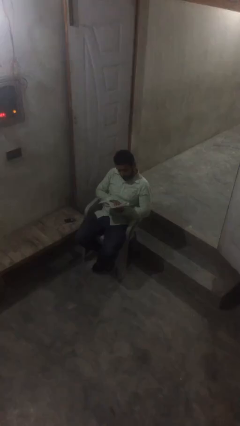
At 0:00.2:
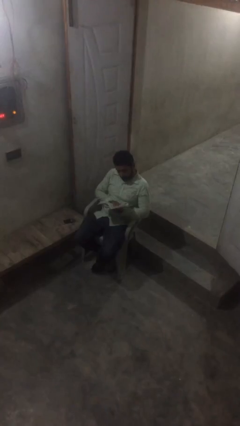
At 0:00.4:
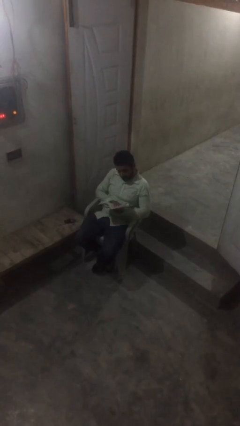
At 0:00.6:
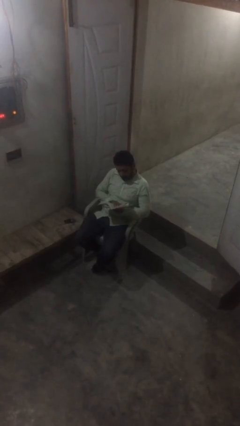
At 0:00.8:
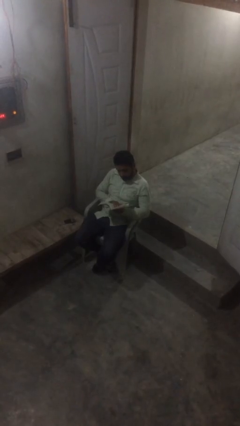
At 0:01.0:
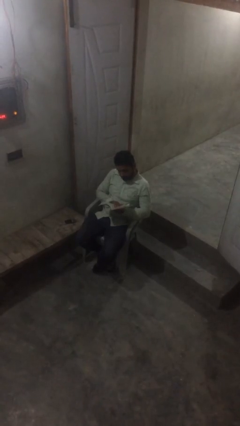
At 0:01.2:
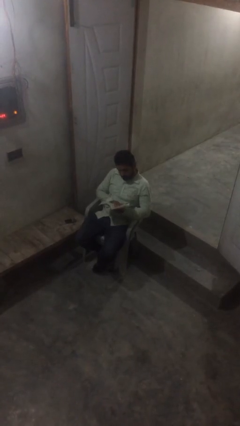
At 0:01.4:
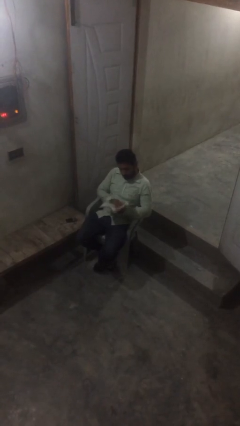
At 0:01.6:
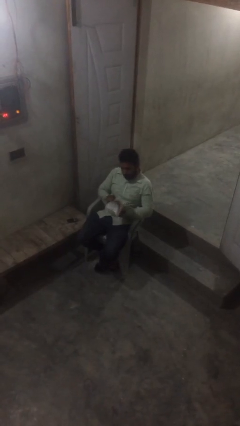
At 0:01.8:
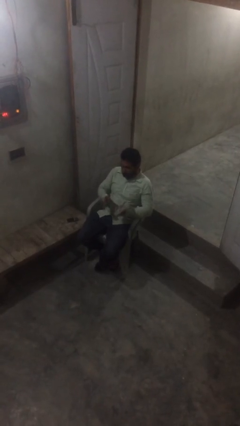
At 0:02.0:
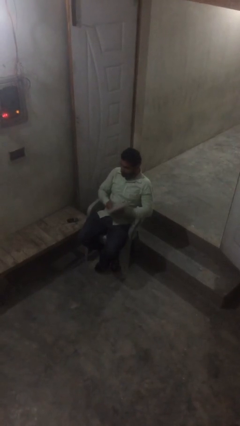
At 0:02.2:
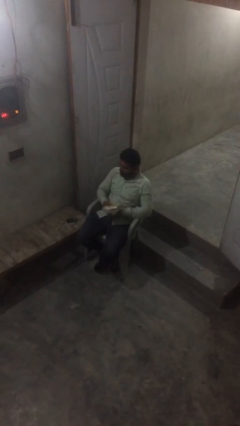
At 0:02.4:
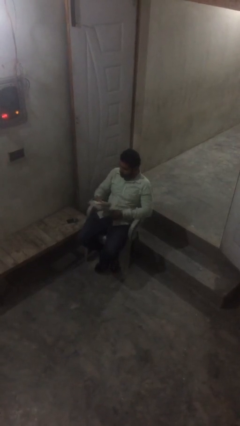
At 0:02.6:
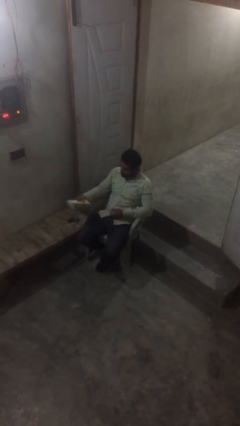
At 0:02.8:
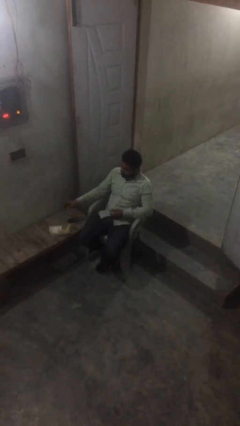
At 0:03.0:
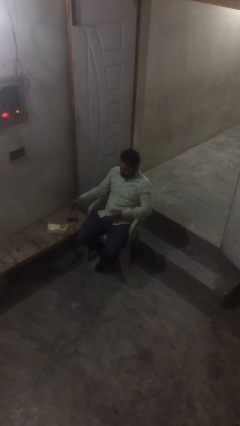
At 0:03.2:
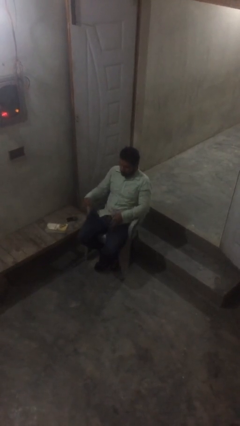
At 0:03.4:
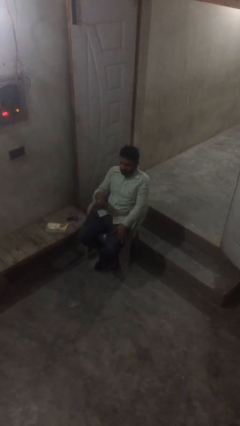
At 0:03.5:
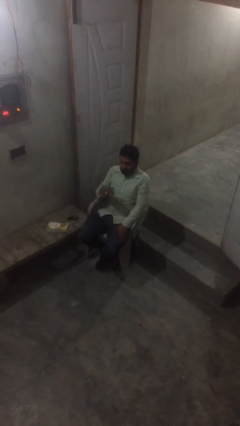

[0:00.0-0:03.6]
person puts down object on table

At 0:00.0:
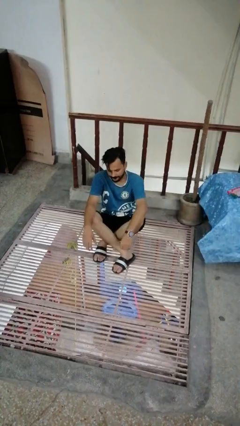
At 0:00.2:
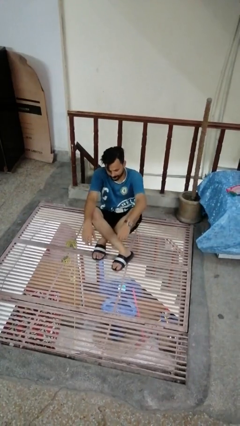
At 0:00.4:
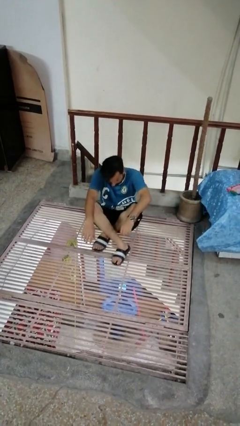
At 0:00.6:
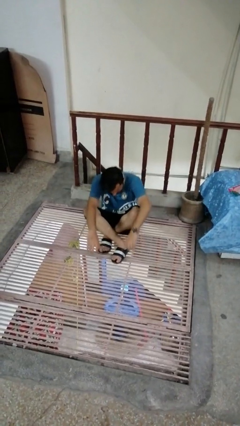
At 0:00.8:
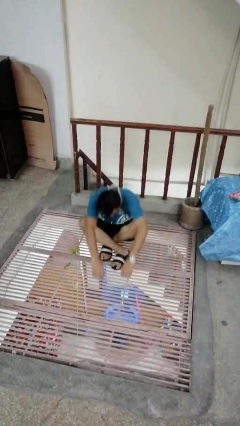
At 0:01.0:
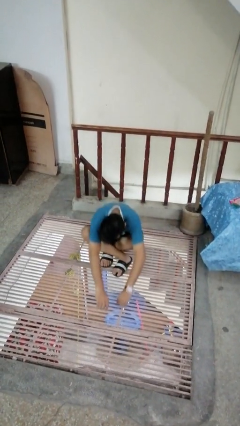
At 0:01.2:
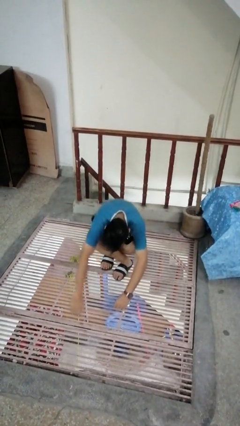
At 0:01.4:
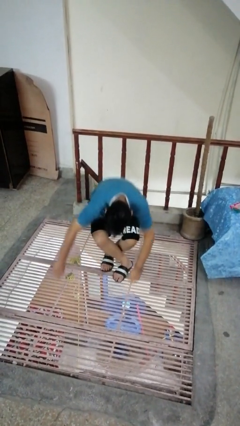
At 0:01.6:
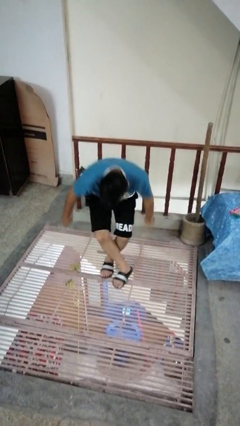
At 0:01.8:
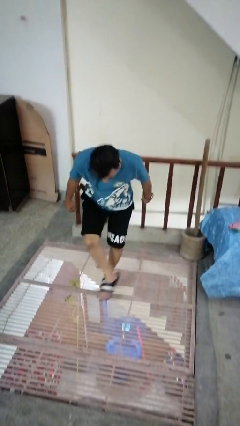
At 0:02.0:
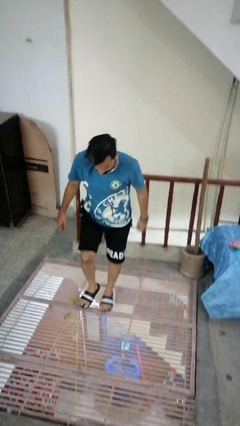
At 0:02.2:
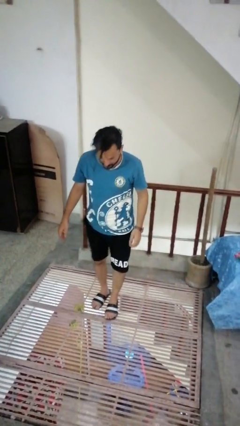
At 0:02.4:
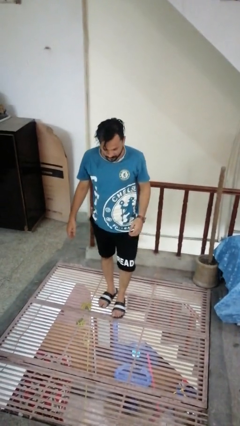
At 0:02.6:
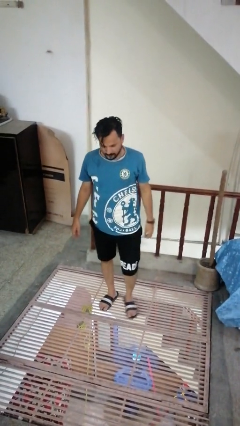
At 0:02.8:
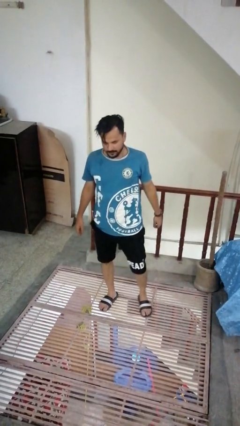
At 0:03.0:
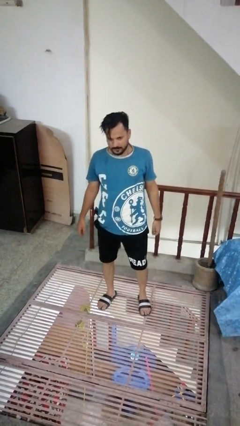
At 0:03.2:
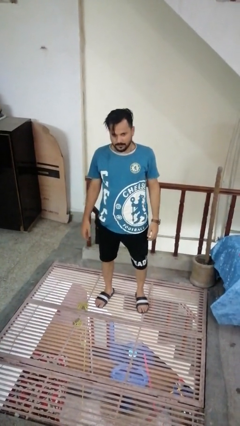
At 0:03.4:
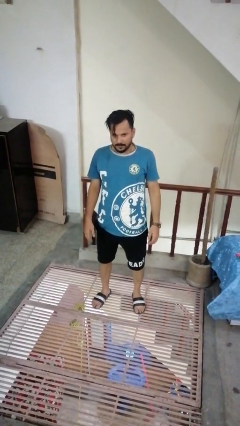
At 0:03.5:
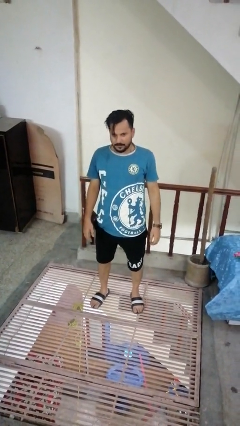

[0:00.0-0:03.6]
person stands up from floor

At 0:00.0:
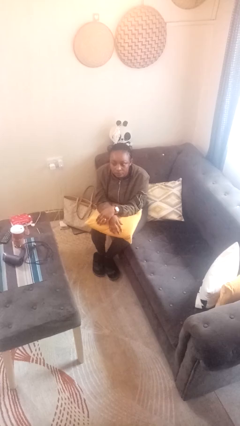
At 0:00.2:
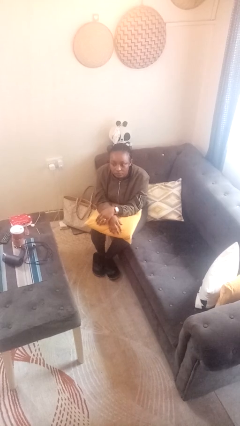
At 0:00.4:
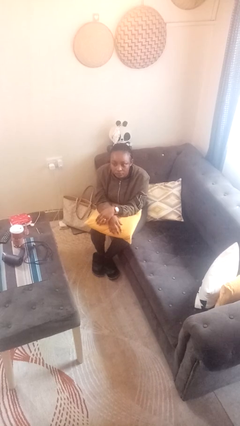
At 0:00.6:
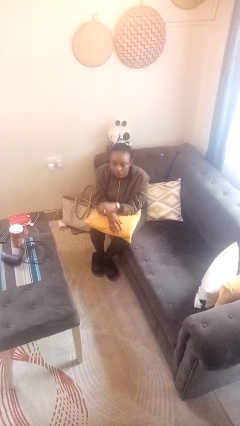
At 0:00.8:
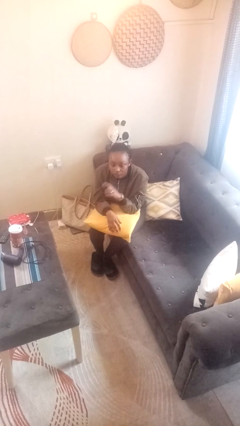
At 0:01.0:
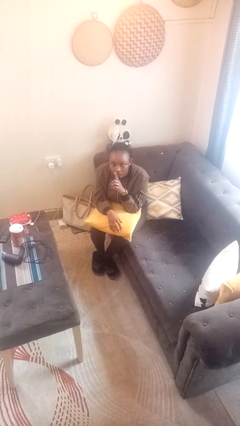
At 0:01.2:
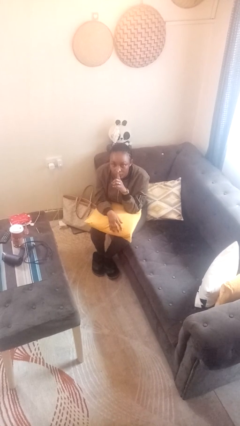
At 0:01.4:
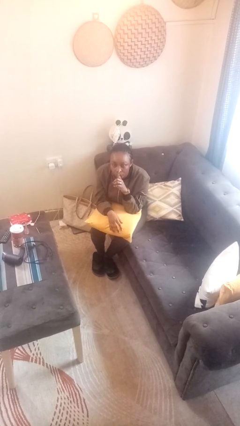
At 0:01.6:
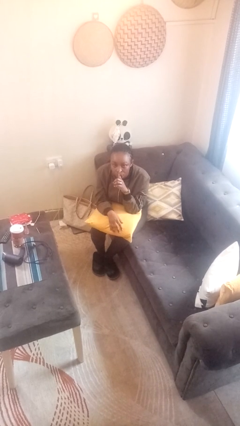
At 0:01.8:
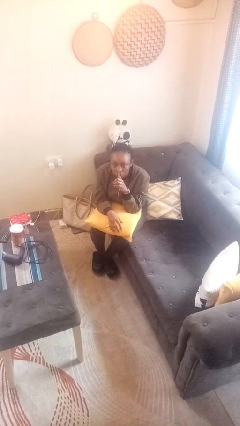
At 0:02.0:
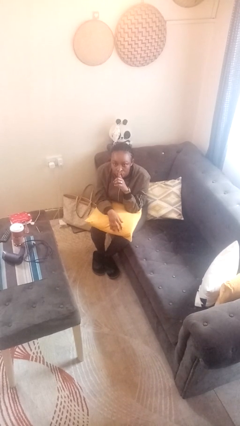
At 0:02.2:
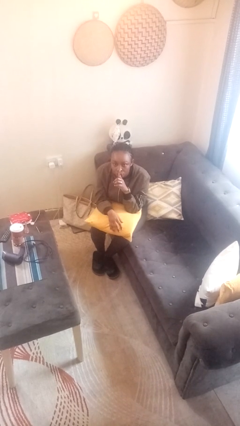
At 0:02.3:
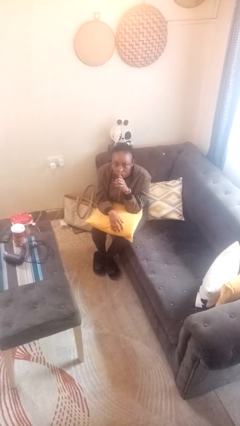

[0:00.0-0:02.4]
person gestures be quiet

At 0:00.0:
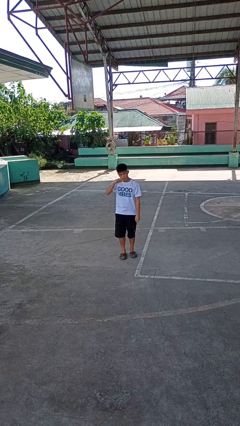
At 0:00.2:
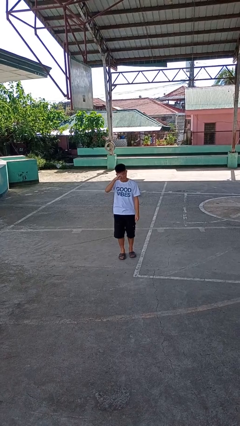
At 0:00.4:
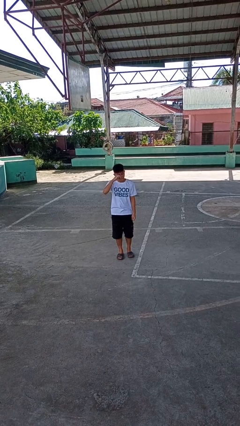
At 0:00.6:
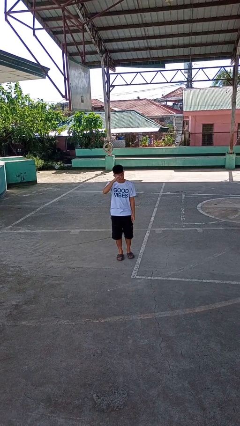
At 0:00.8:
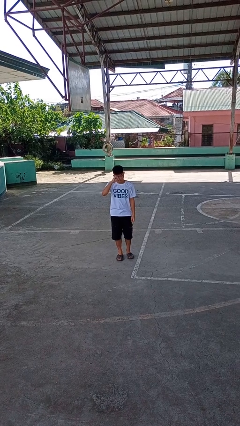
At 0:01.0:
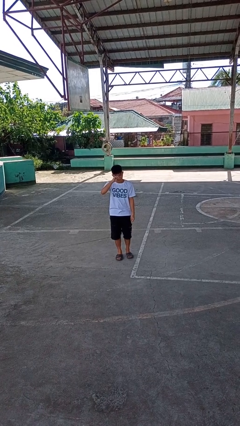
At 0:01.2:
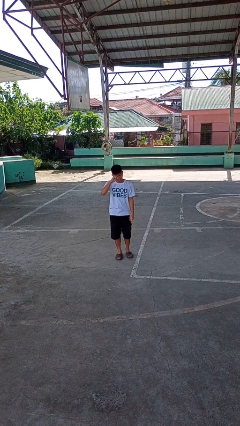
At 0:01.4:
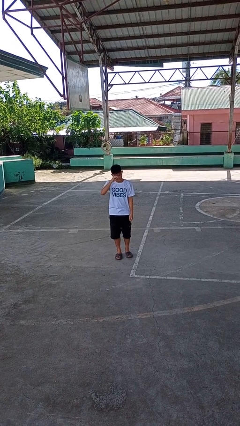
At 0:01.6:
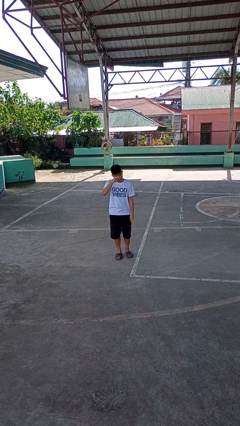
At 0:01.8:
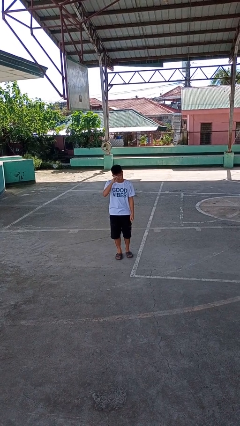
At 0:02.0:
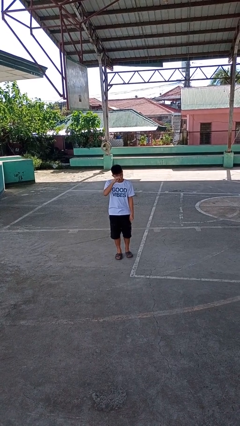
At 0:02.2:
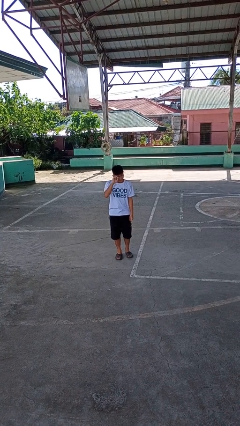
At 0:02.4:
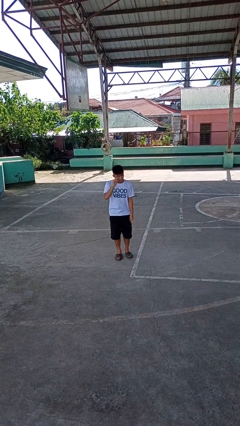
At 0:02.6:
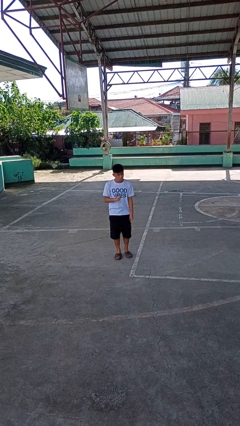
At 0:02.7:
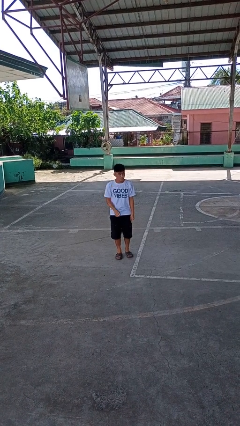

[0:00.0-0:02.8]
person rubs eyes

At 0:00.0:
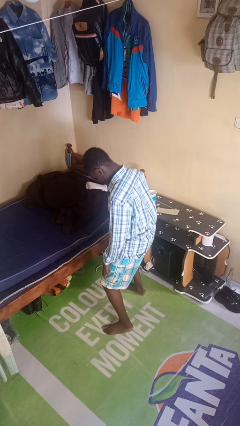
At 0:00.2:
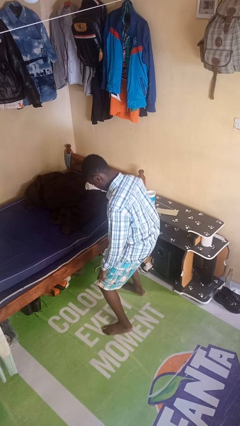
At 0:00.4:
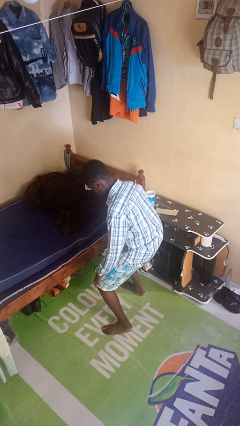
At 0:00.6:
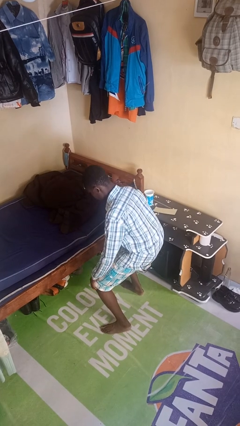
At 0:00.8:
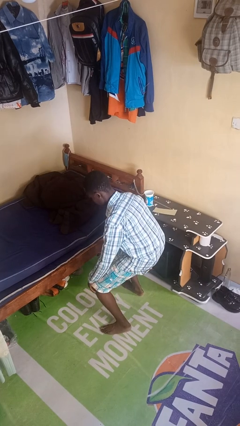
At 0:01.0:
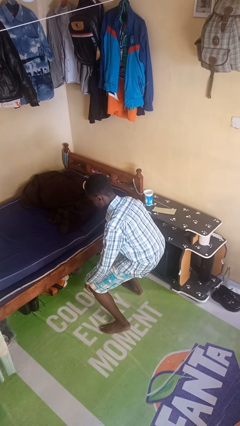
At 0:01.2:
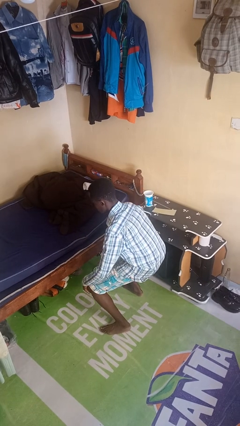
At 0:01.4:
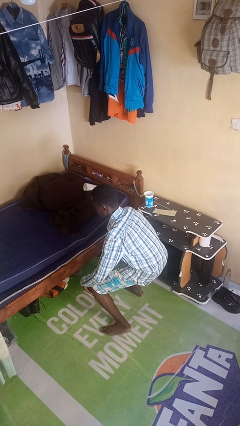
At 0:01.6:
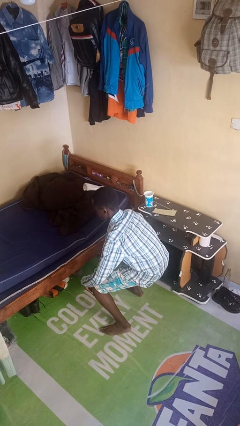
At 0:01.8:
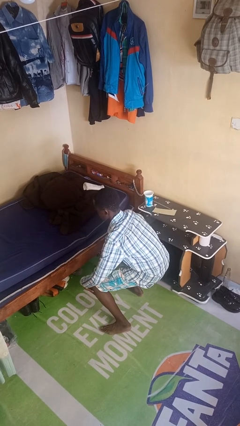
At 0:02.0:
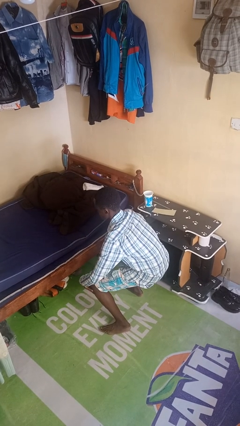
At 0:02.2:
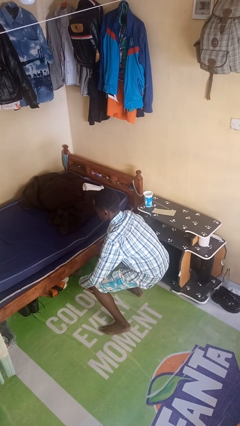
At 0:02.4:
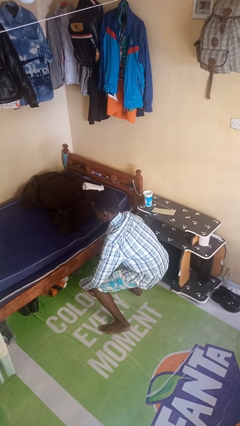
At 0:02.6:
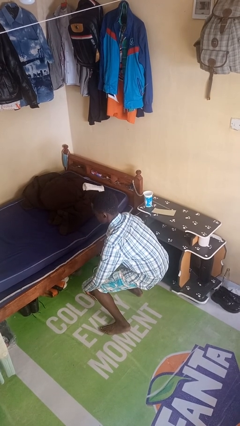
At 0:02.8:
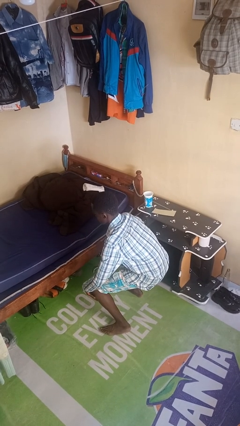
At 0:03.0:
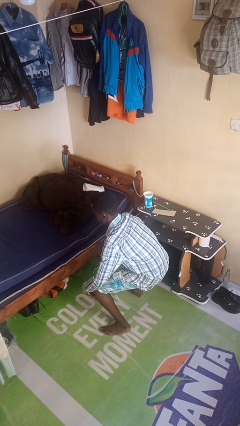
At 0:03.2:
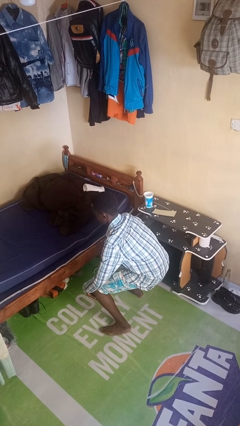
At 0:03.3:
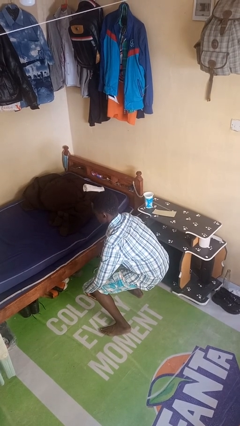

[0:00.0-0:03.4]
person squats

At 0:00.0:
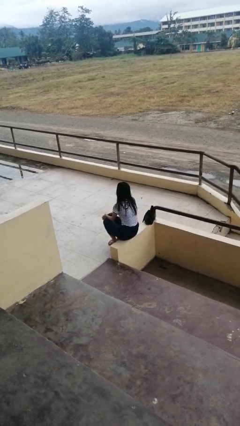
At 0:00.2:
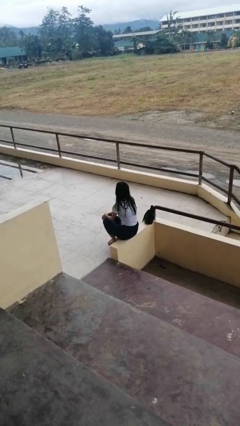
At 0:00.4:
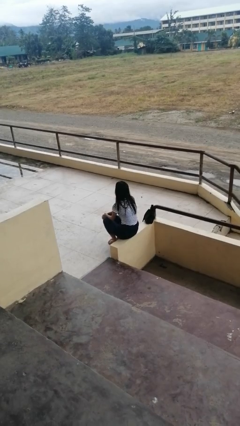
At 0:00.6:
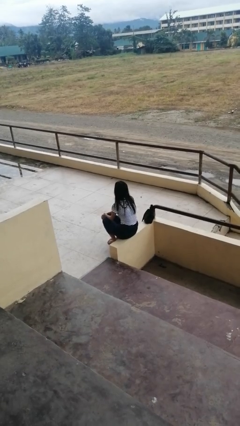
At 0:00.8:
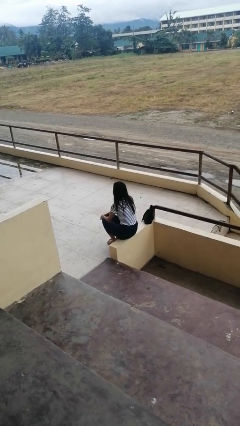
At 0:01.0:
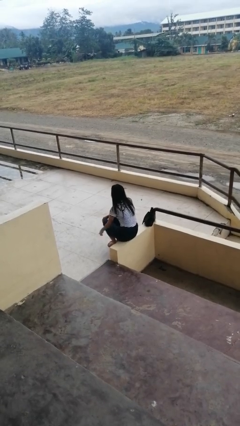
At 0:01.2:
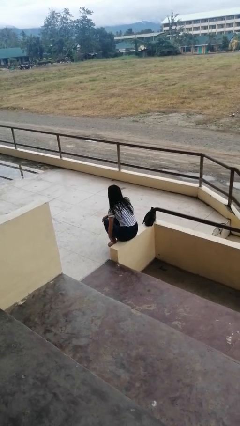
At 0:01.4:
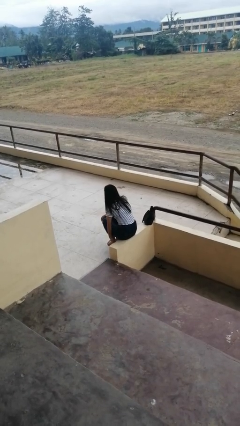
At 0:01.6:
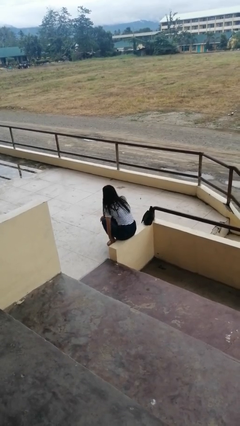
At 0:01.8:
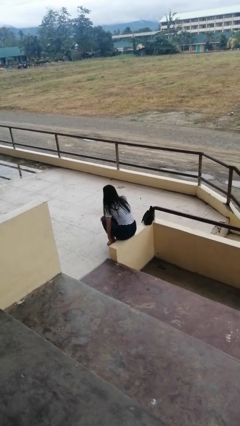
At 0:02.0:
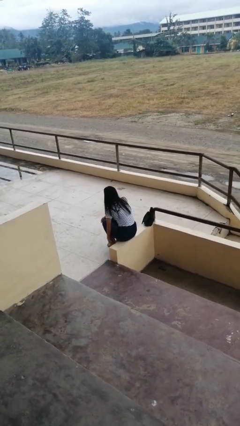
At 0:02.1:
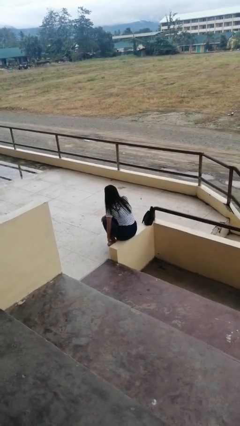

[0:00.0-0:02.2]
person rubs foot
